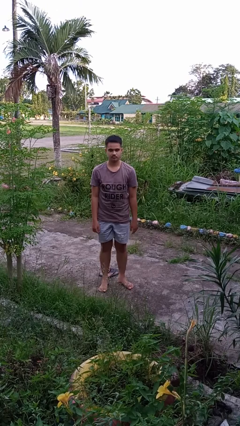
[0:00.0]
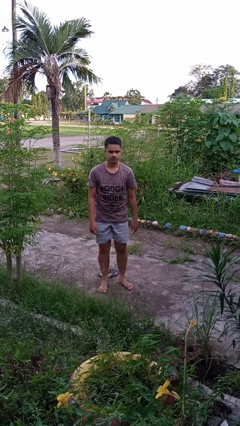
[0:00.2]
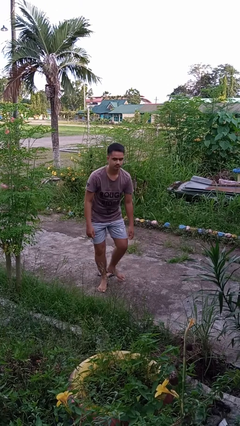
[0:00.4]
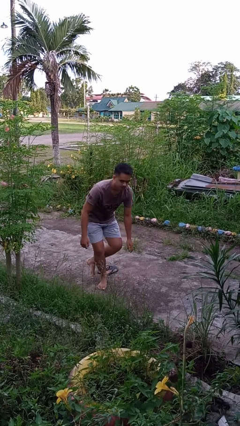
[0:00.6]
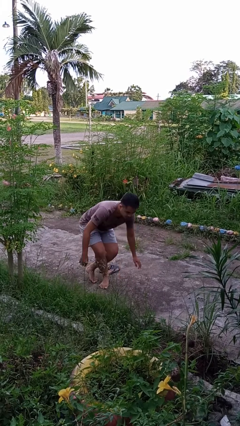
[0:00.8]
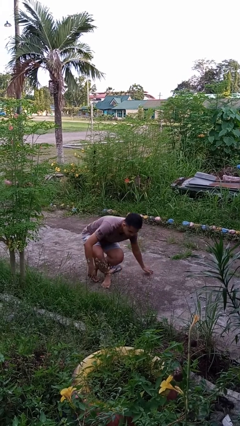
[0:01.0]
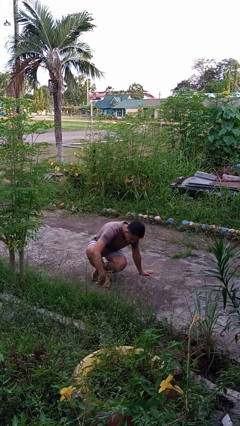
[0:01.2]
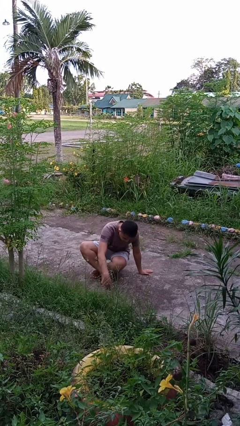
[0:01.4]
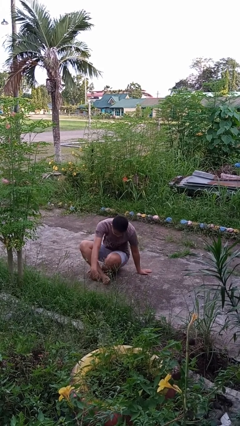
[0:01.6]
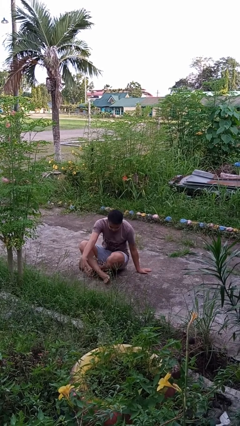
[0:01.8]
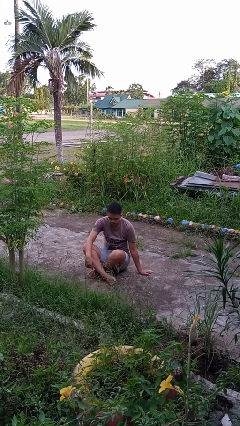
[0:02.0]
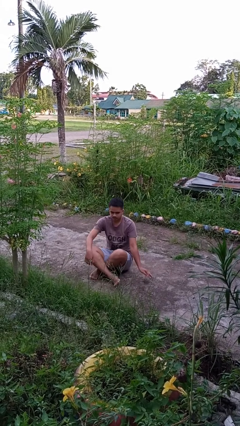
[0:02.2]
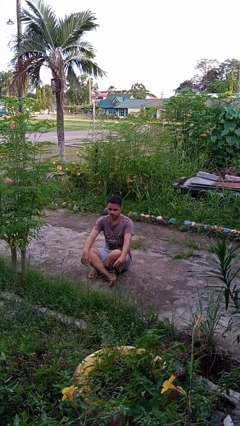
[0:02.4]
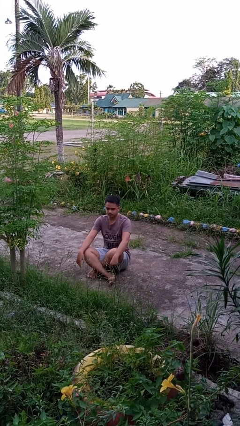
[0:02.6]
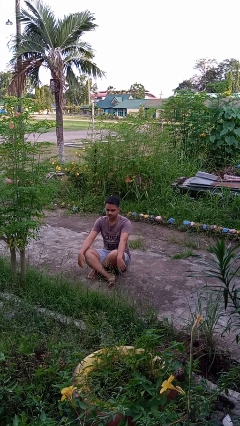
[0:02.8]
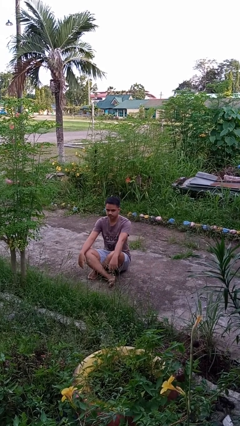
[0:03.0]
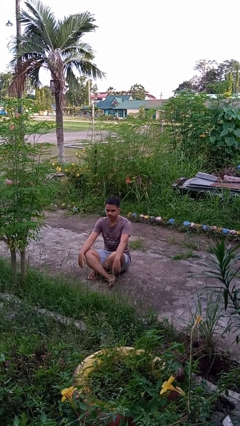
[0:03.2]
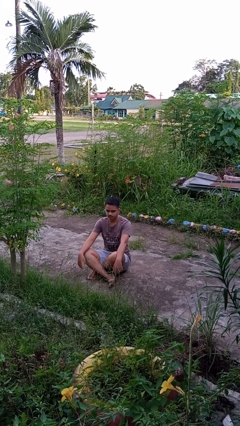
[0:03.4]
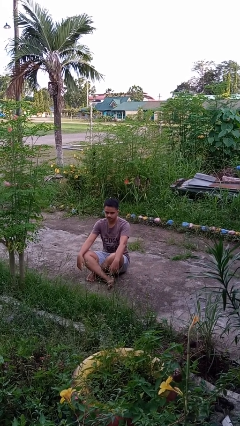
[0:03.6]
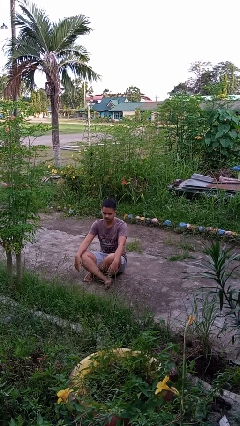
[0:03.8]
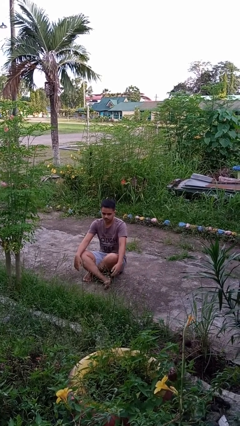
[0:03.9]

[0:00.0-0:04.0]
person sits crisscross

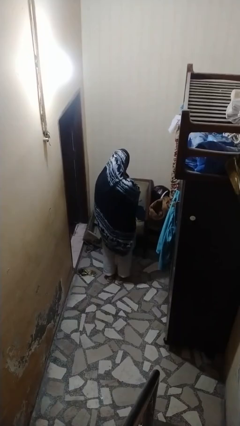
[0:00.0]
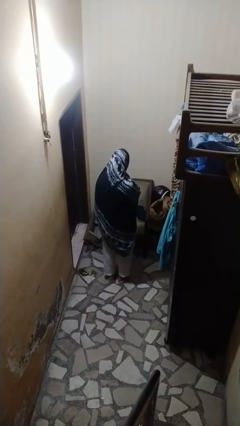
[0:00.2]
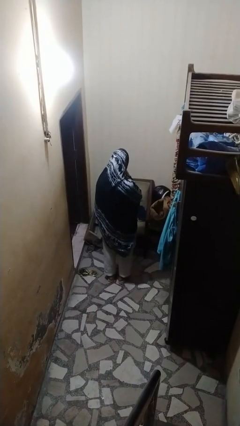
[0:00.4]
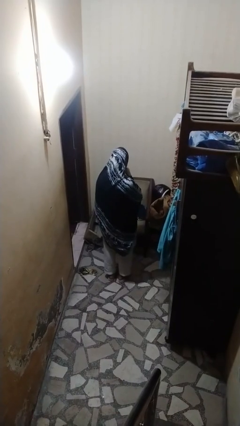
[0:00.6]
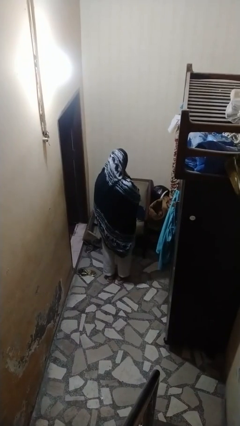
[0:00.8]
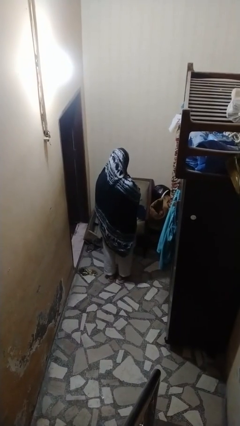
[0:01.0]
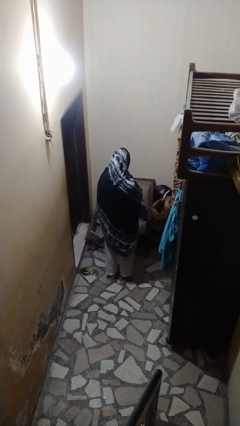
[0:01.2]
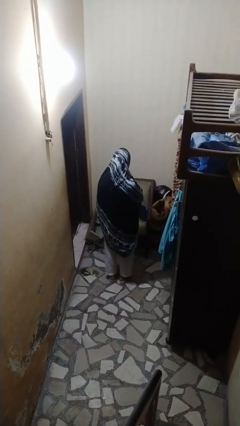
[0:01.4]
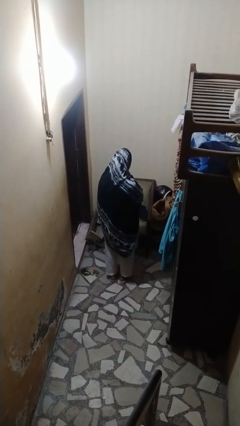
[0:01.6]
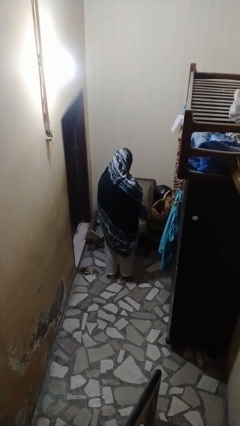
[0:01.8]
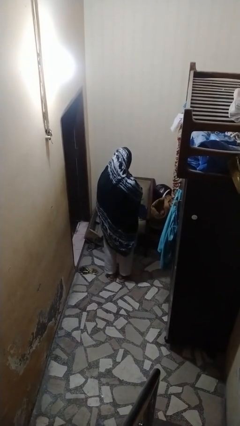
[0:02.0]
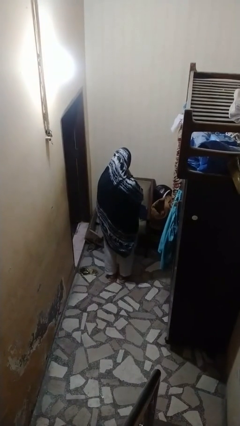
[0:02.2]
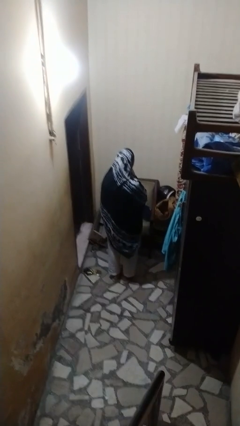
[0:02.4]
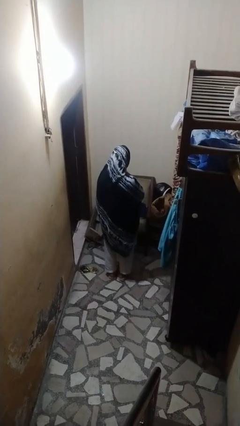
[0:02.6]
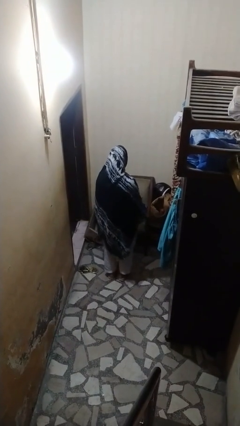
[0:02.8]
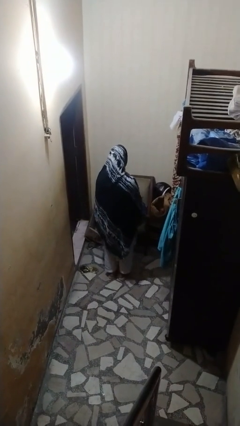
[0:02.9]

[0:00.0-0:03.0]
person strokes chin

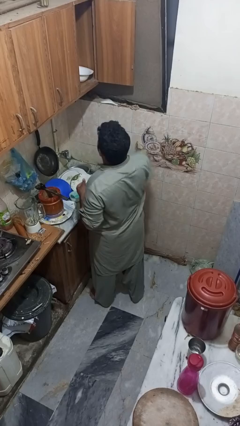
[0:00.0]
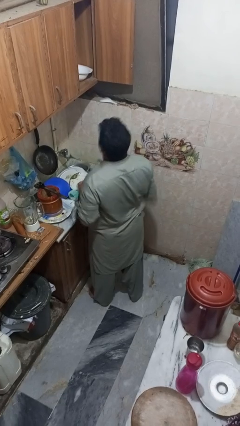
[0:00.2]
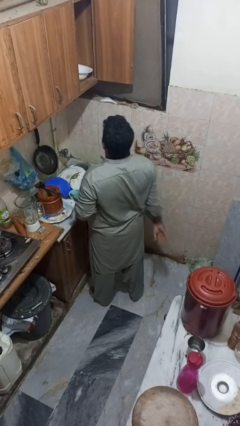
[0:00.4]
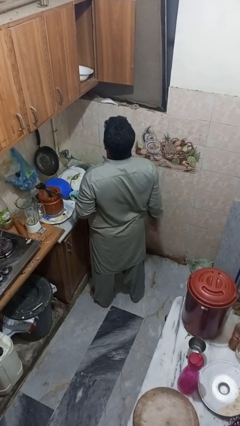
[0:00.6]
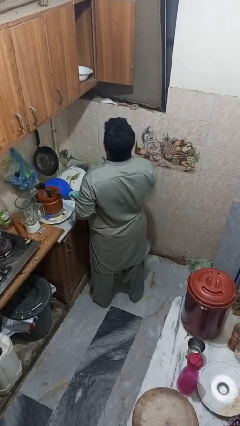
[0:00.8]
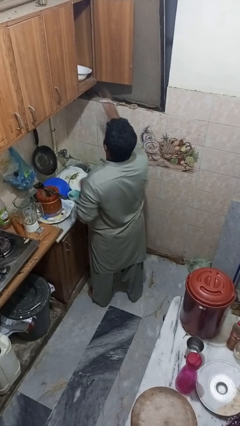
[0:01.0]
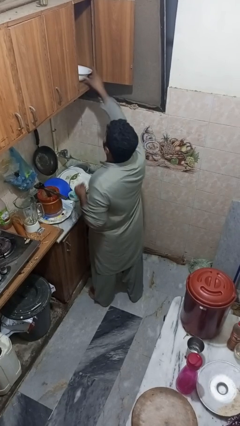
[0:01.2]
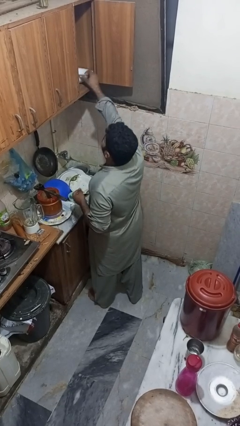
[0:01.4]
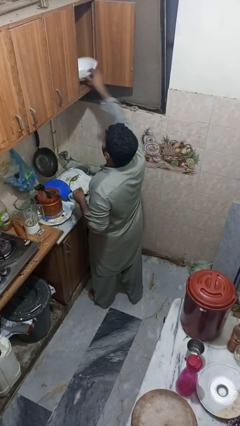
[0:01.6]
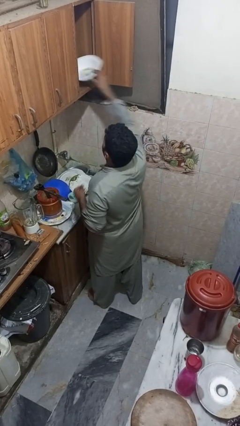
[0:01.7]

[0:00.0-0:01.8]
person takes object from cabinet

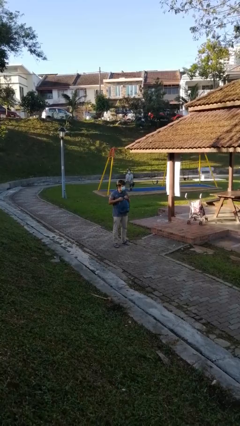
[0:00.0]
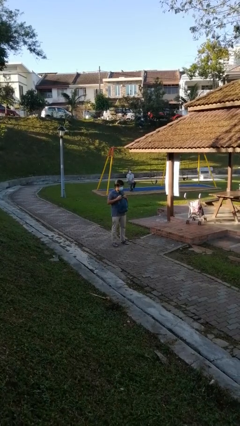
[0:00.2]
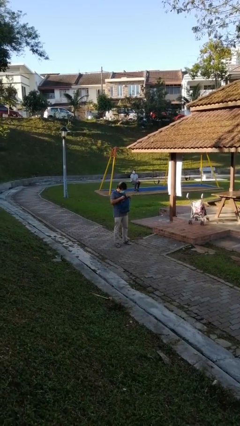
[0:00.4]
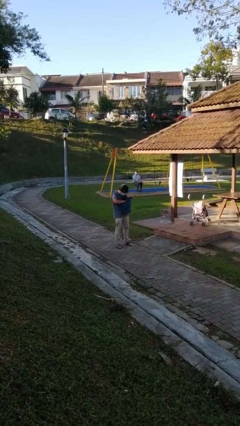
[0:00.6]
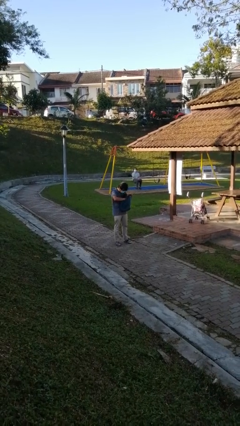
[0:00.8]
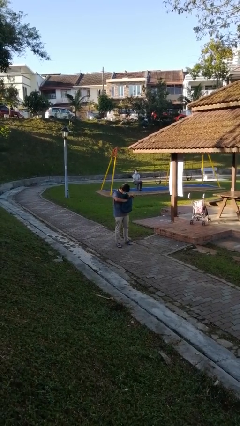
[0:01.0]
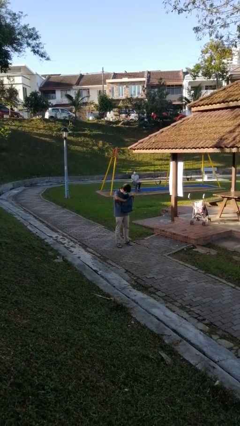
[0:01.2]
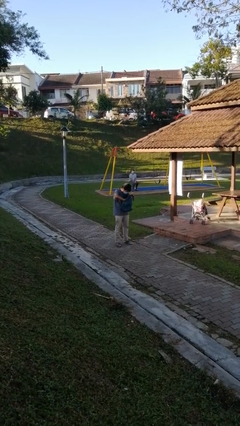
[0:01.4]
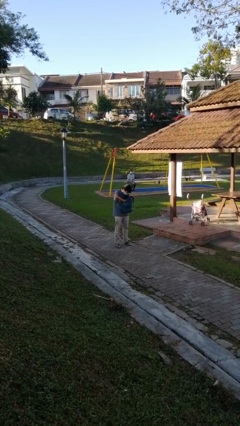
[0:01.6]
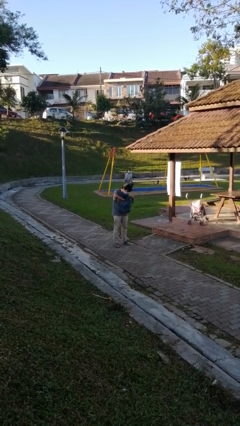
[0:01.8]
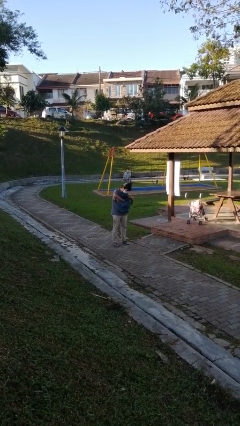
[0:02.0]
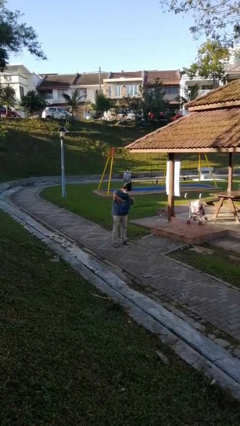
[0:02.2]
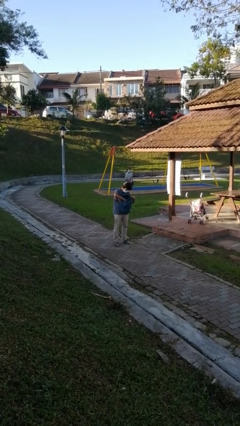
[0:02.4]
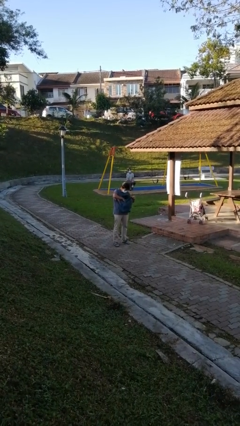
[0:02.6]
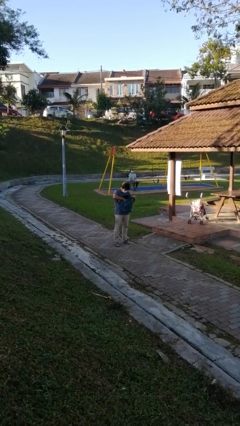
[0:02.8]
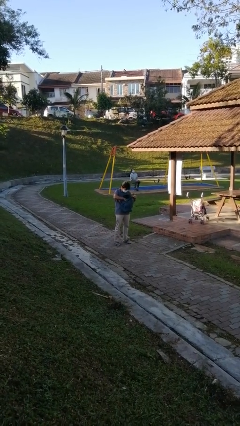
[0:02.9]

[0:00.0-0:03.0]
person searches in backpack

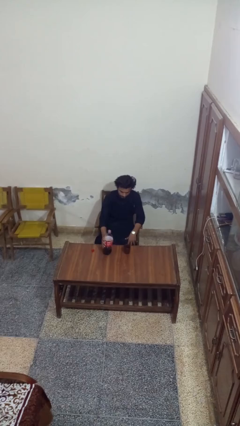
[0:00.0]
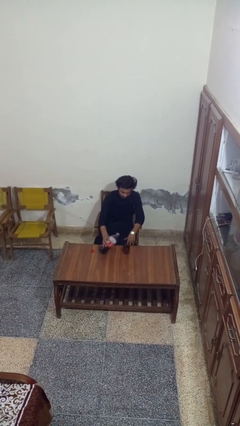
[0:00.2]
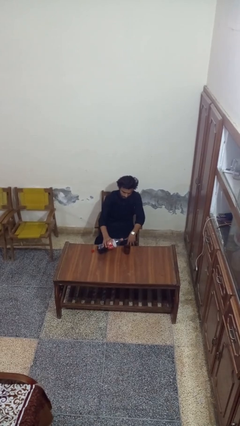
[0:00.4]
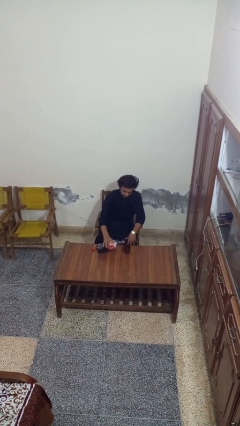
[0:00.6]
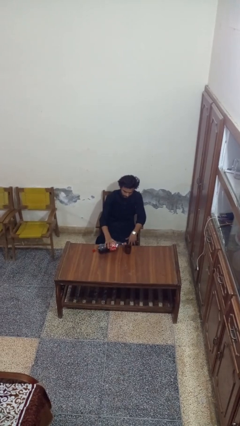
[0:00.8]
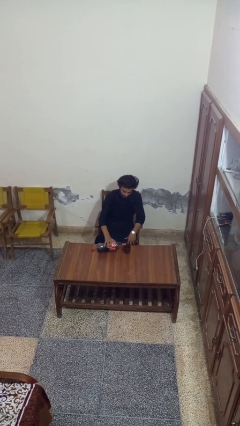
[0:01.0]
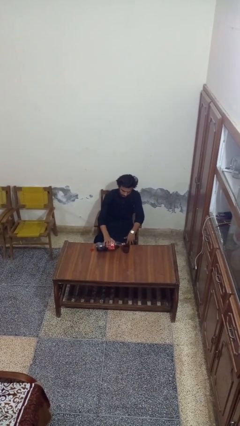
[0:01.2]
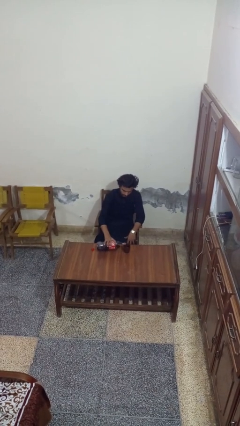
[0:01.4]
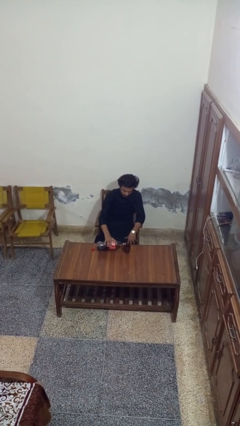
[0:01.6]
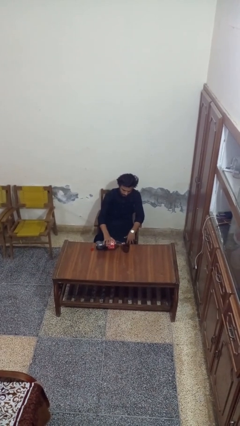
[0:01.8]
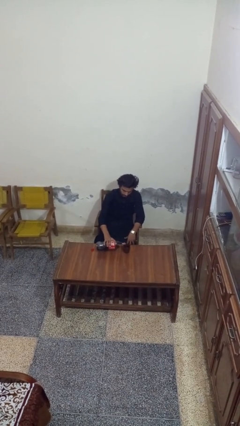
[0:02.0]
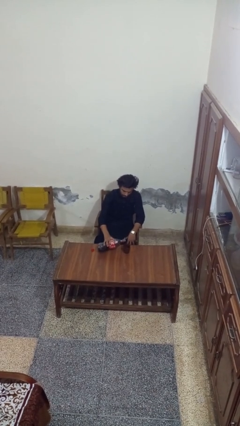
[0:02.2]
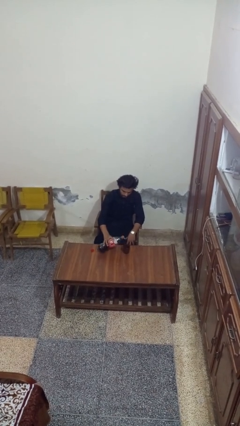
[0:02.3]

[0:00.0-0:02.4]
person pours liquid into cup

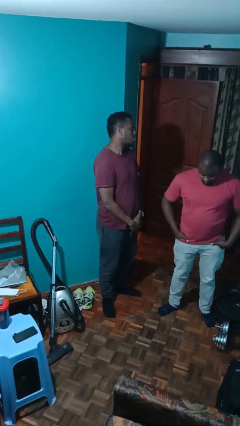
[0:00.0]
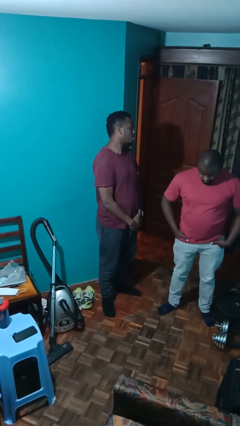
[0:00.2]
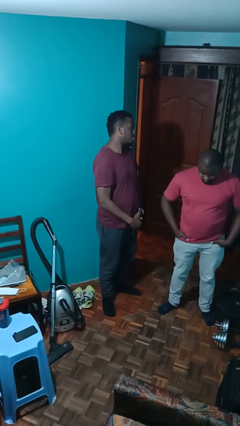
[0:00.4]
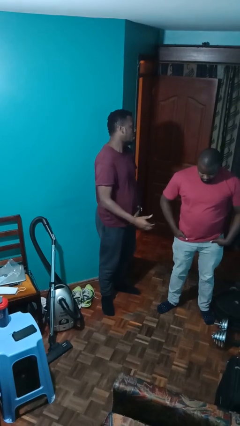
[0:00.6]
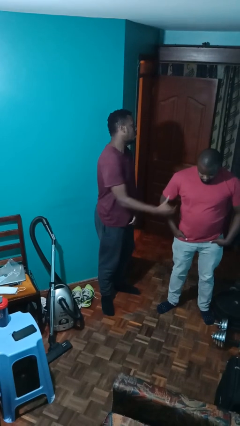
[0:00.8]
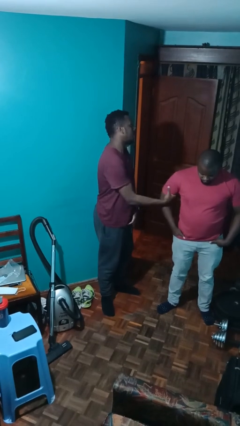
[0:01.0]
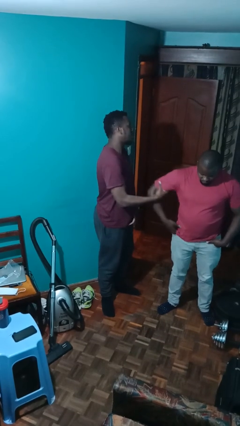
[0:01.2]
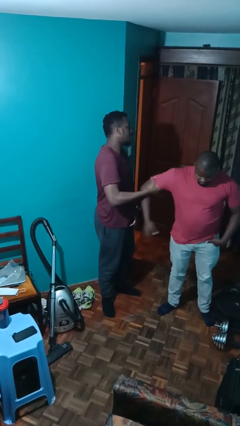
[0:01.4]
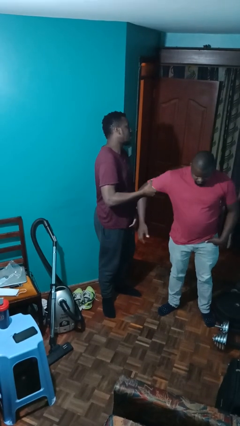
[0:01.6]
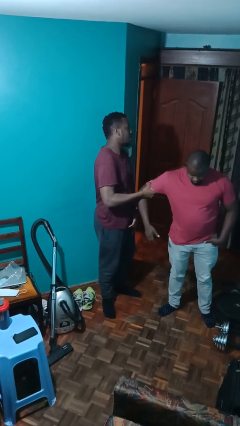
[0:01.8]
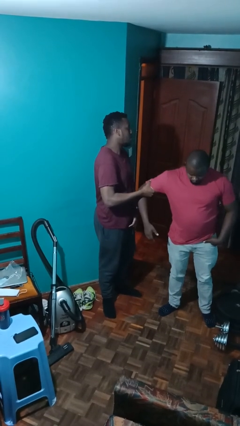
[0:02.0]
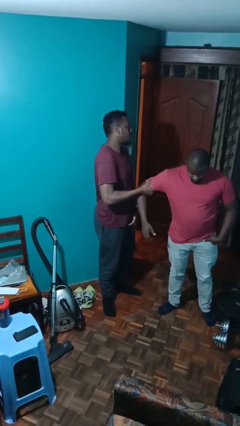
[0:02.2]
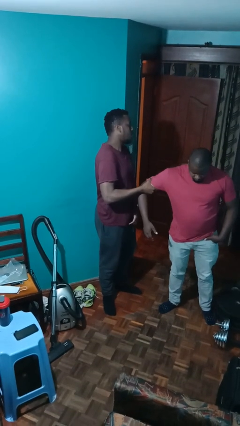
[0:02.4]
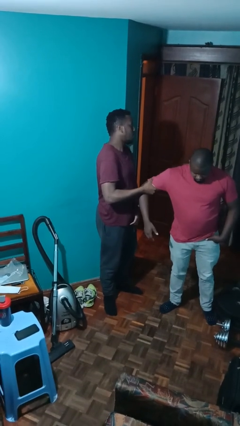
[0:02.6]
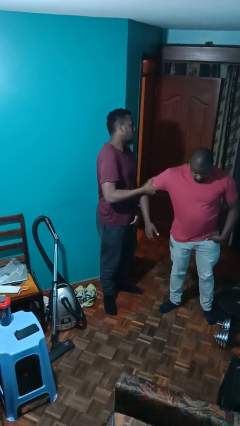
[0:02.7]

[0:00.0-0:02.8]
person grabs person by bicep

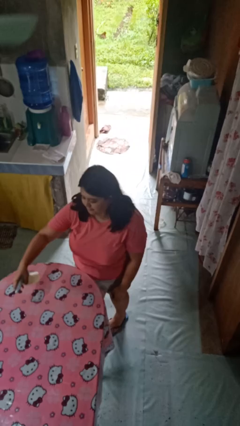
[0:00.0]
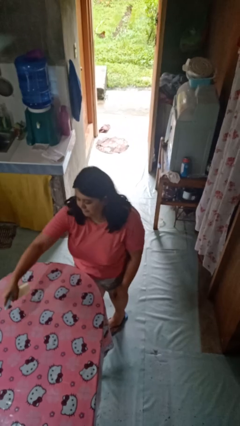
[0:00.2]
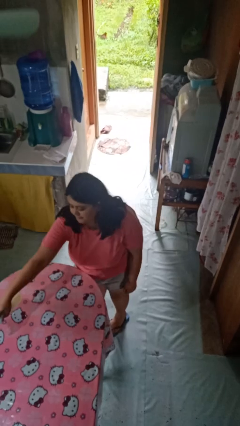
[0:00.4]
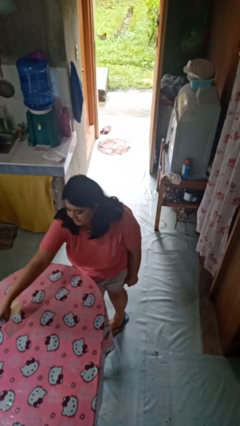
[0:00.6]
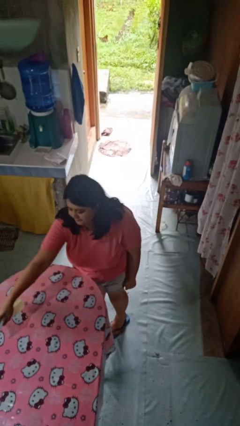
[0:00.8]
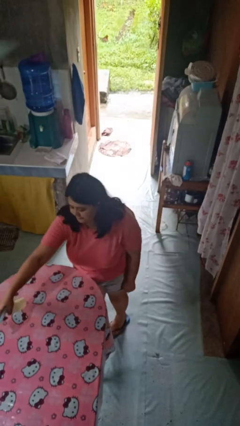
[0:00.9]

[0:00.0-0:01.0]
person sprays from bottle
